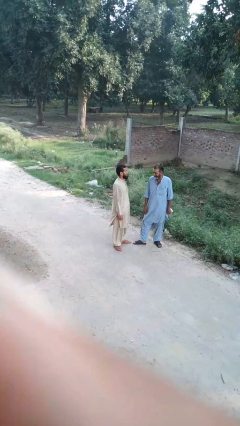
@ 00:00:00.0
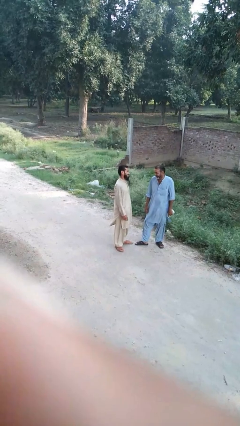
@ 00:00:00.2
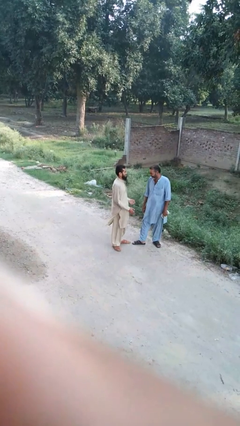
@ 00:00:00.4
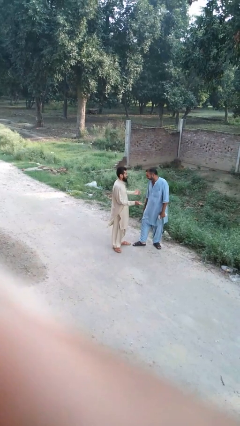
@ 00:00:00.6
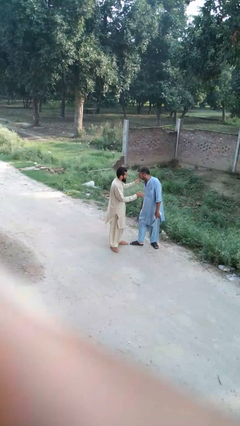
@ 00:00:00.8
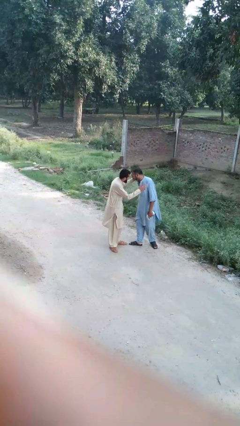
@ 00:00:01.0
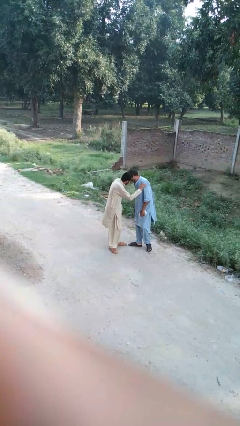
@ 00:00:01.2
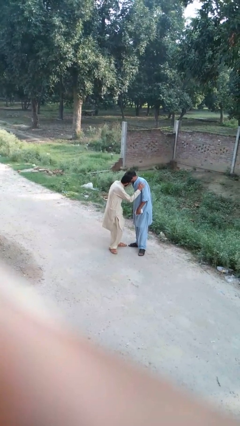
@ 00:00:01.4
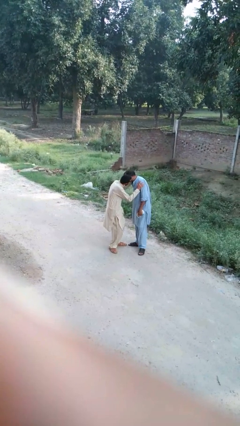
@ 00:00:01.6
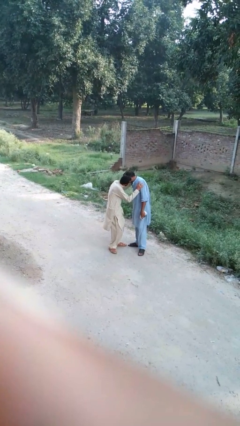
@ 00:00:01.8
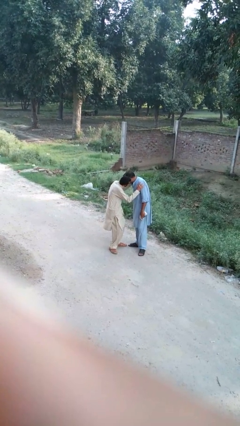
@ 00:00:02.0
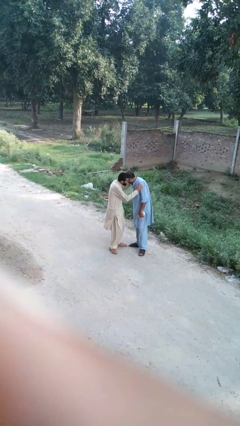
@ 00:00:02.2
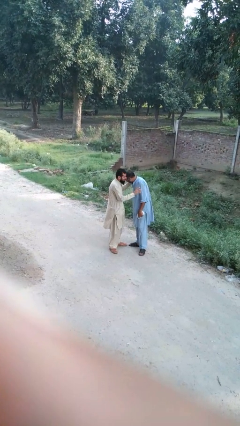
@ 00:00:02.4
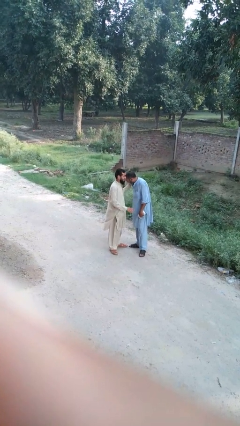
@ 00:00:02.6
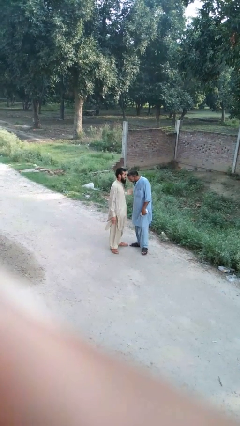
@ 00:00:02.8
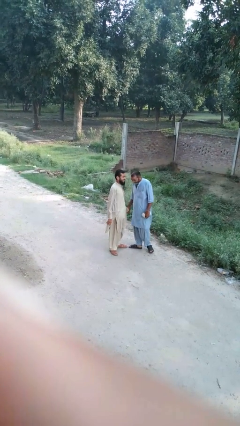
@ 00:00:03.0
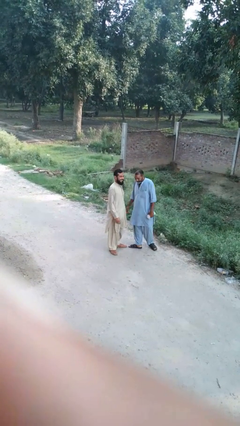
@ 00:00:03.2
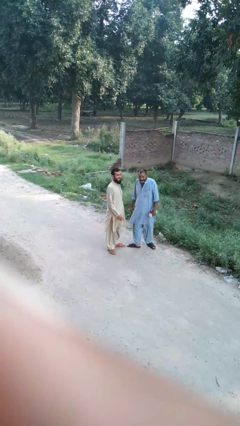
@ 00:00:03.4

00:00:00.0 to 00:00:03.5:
person kisses cheek of person

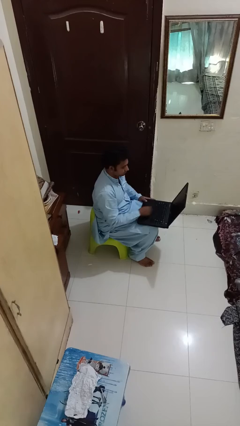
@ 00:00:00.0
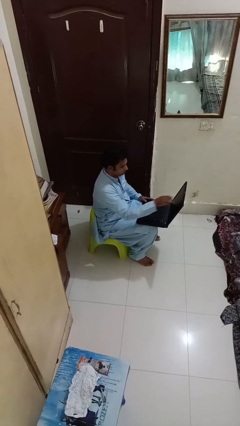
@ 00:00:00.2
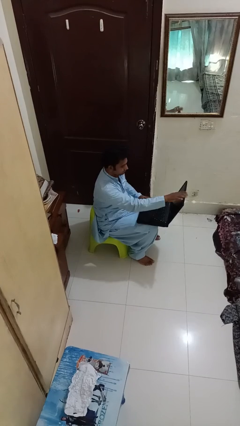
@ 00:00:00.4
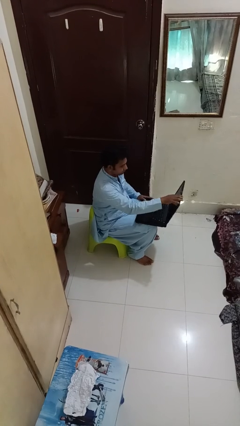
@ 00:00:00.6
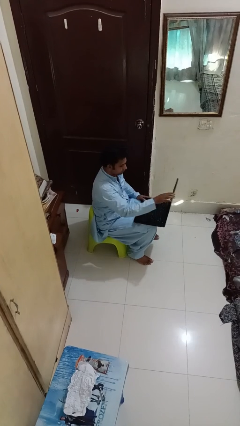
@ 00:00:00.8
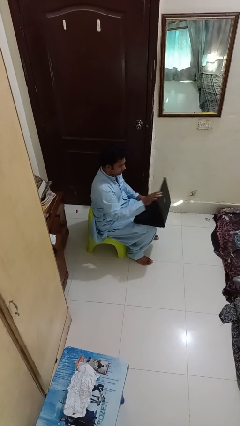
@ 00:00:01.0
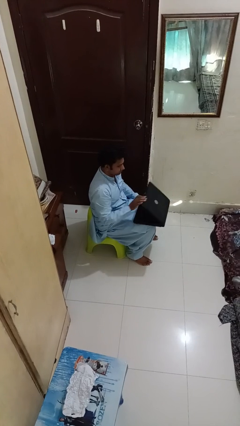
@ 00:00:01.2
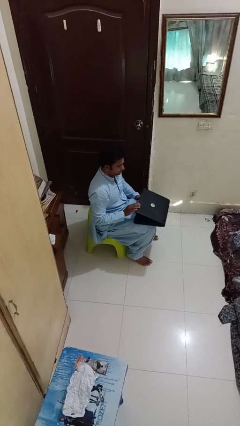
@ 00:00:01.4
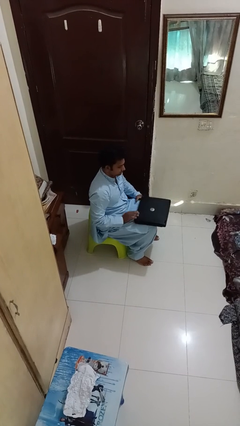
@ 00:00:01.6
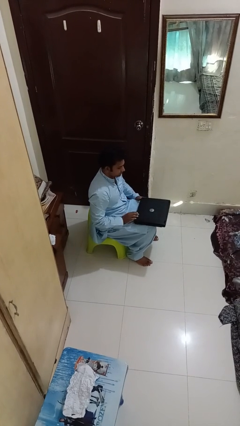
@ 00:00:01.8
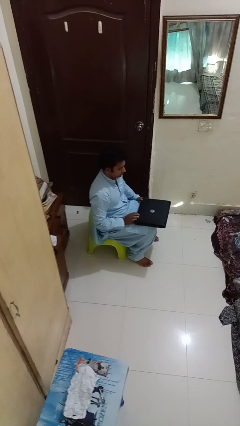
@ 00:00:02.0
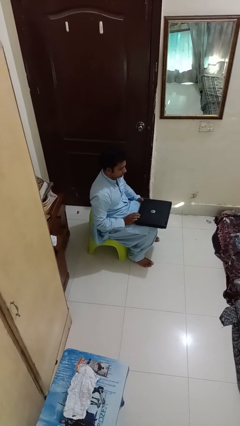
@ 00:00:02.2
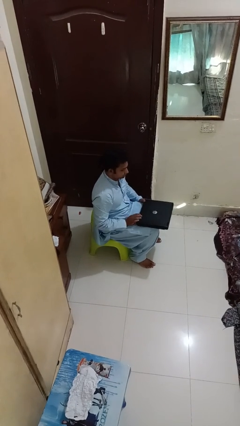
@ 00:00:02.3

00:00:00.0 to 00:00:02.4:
person closes laptop

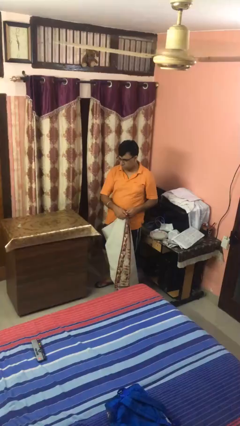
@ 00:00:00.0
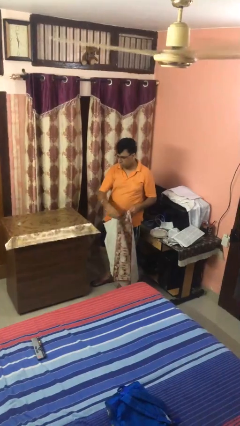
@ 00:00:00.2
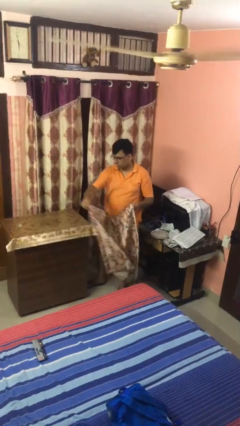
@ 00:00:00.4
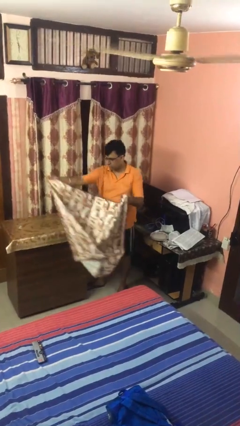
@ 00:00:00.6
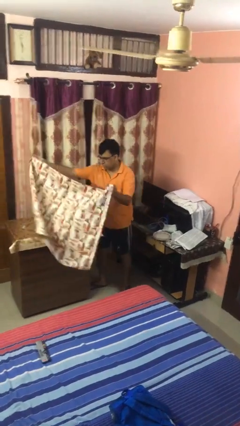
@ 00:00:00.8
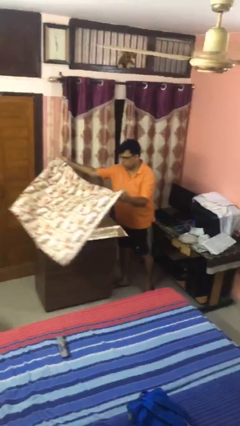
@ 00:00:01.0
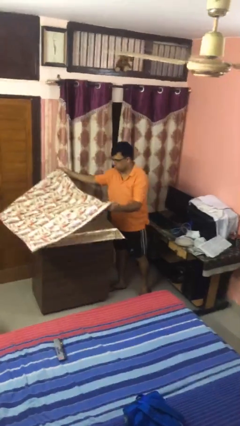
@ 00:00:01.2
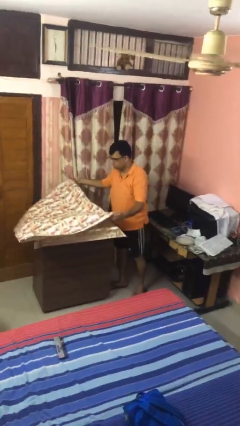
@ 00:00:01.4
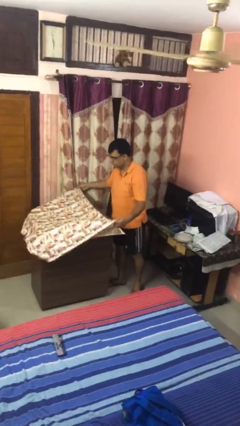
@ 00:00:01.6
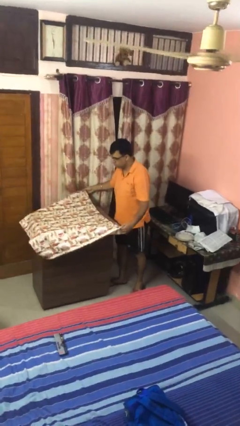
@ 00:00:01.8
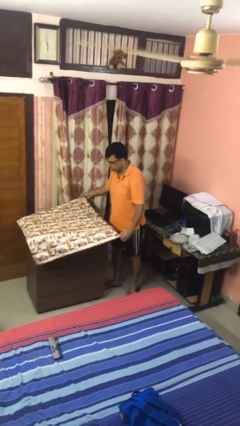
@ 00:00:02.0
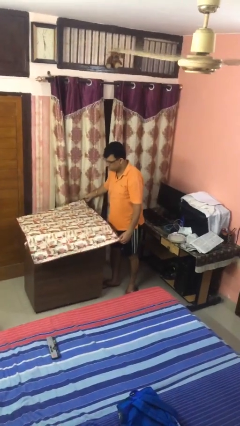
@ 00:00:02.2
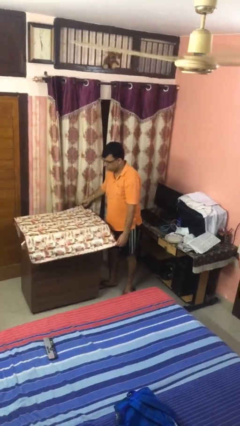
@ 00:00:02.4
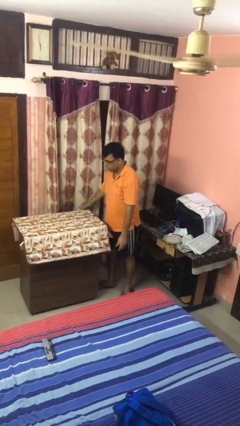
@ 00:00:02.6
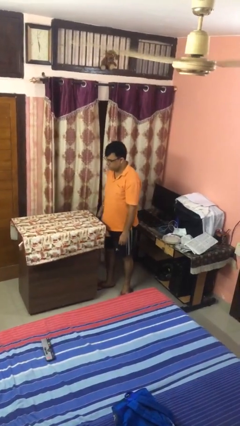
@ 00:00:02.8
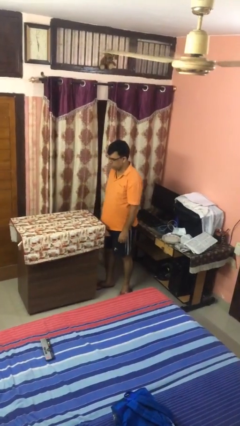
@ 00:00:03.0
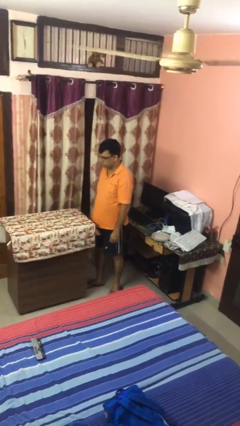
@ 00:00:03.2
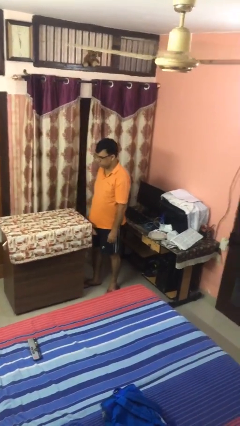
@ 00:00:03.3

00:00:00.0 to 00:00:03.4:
person spreads tablecloth

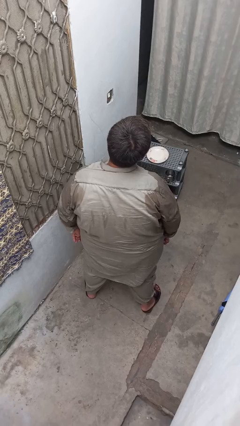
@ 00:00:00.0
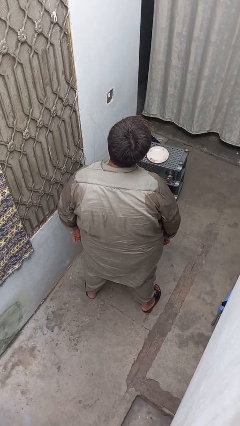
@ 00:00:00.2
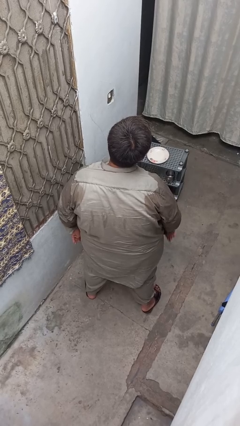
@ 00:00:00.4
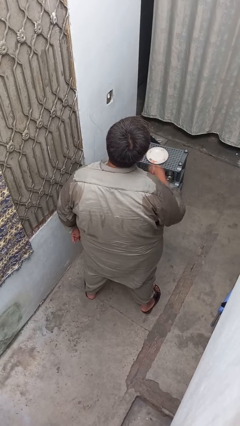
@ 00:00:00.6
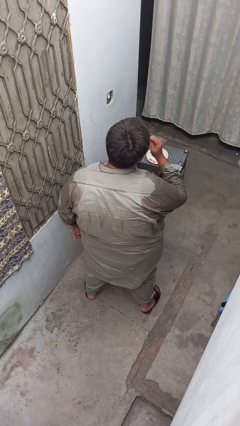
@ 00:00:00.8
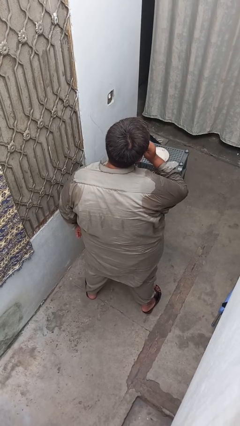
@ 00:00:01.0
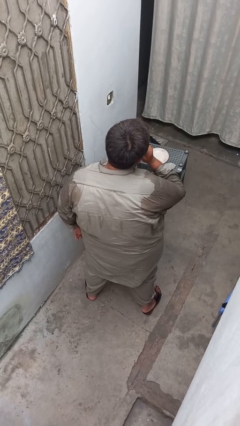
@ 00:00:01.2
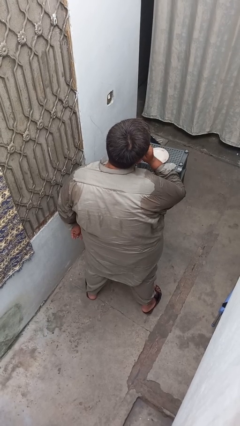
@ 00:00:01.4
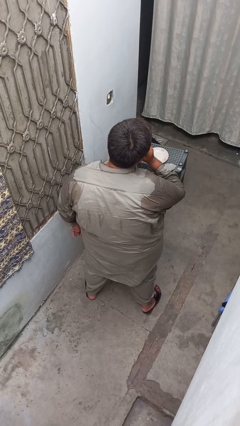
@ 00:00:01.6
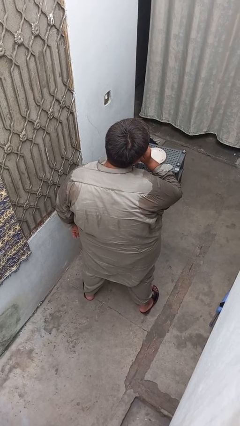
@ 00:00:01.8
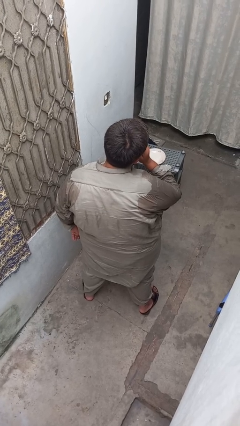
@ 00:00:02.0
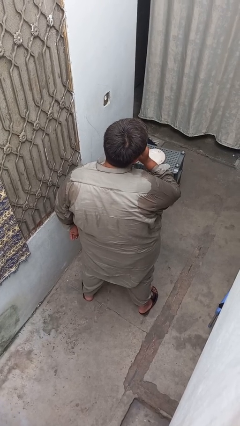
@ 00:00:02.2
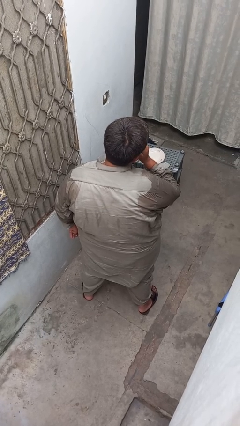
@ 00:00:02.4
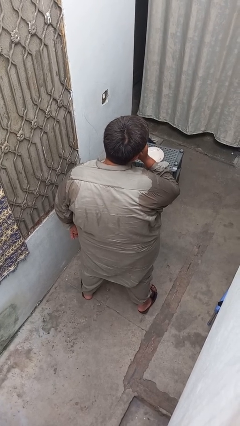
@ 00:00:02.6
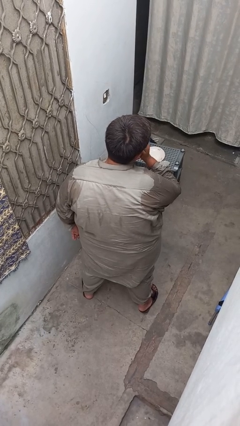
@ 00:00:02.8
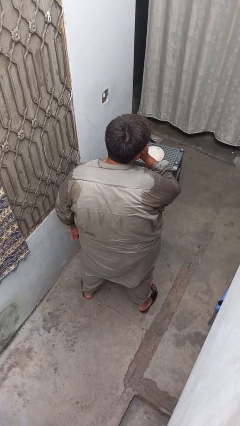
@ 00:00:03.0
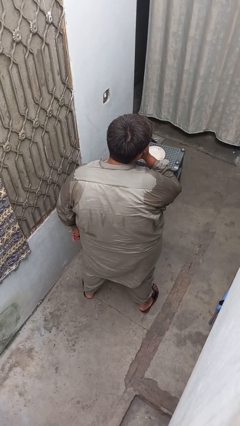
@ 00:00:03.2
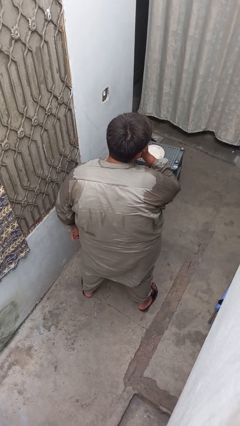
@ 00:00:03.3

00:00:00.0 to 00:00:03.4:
person flosses

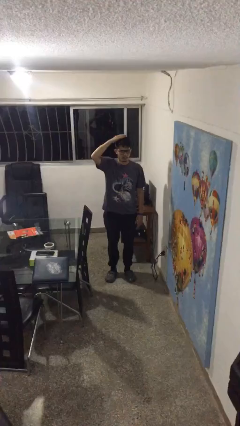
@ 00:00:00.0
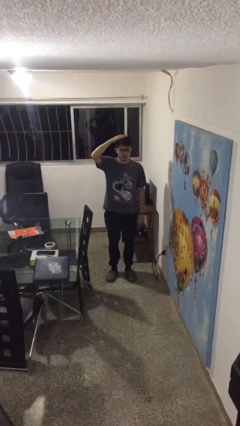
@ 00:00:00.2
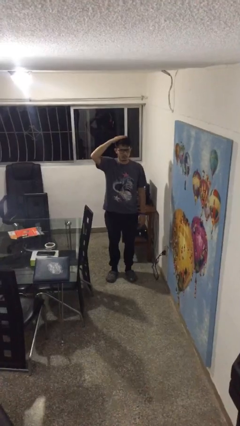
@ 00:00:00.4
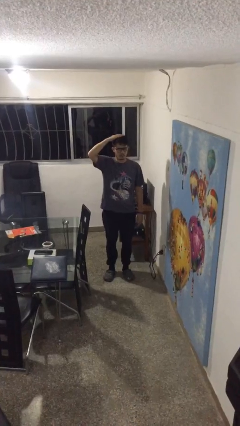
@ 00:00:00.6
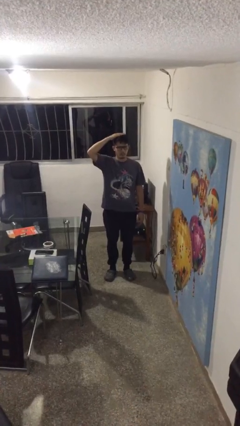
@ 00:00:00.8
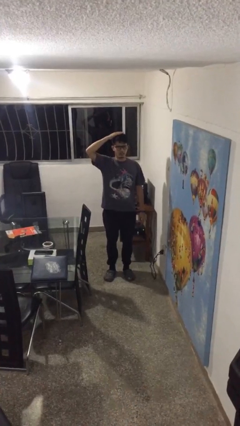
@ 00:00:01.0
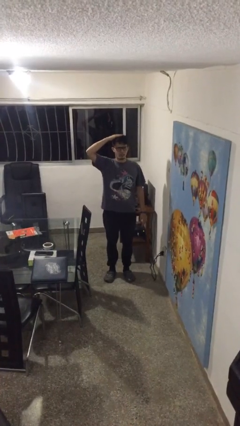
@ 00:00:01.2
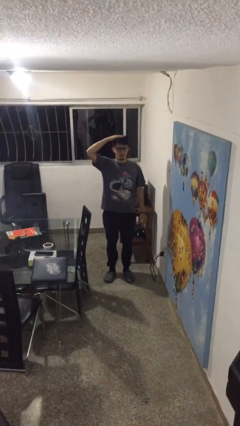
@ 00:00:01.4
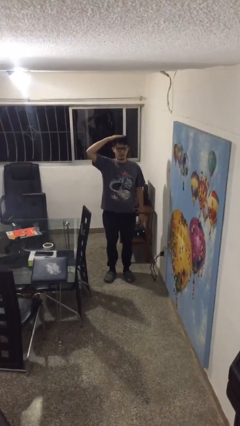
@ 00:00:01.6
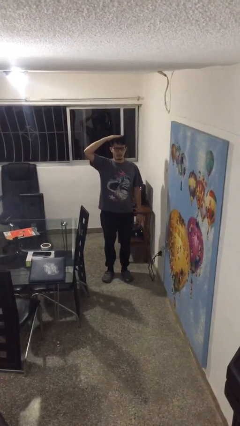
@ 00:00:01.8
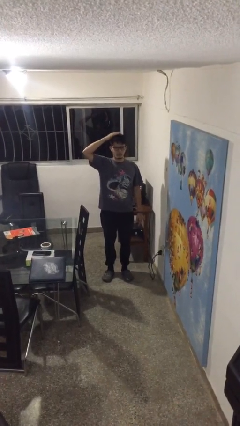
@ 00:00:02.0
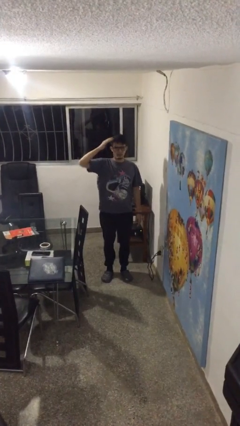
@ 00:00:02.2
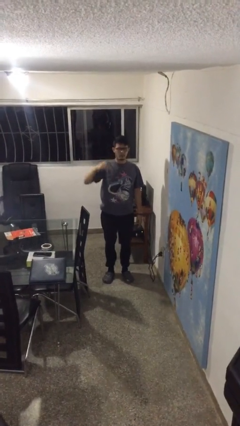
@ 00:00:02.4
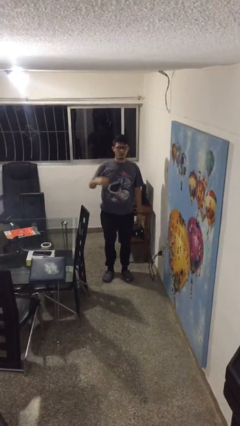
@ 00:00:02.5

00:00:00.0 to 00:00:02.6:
person pats head

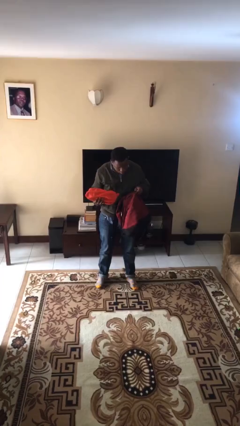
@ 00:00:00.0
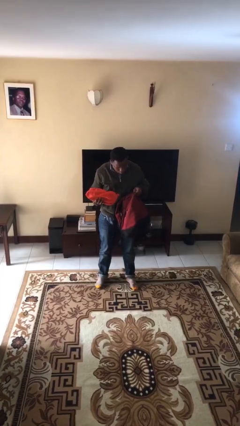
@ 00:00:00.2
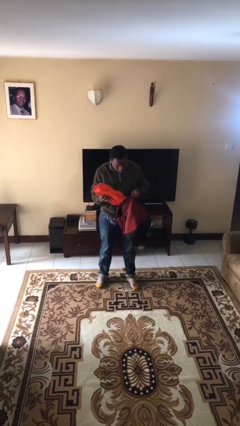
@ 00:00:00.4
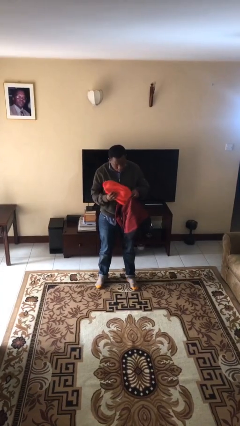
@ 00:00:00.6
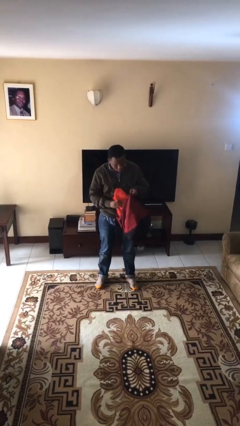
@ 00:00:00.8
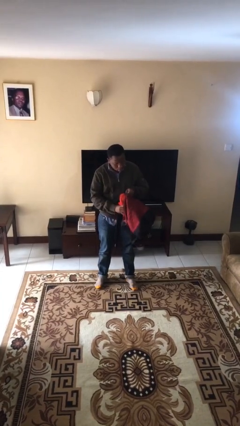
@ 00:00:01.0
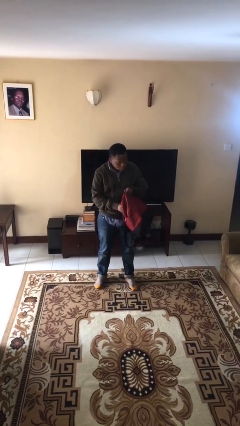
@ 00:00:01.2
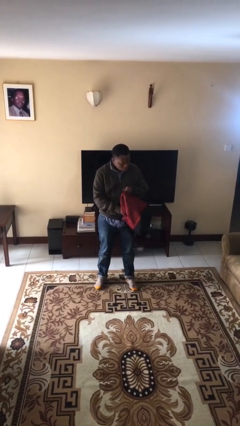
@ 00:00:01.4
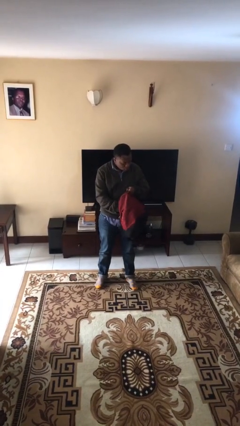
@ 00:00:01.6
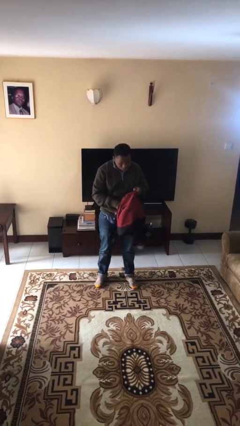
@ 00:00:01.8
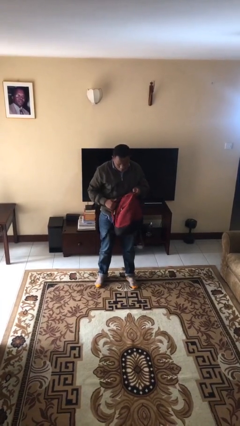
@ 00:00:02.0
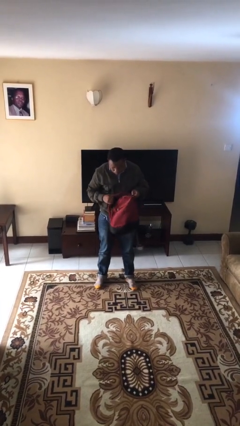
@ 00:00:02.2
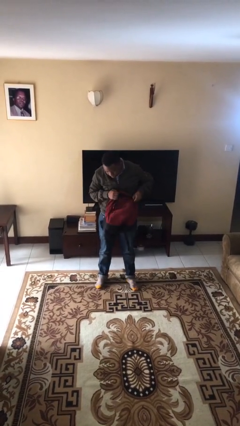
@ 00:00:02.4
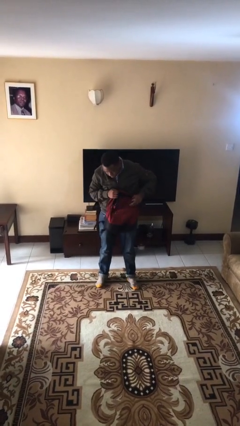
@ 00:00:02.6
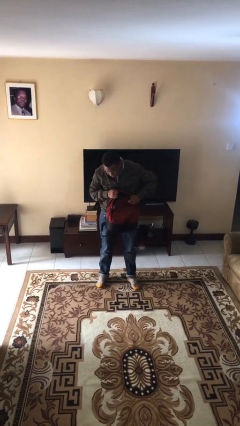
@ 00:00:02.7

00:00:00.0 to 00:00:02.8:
person puts object into backpack
